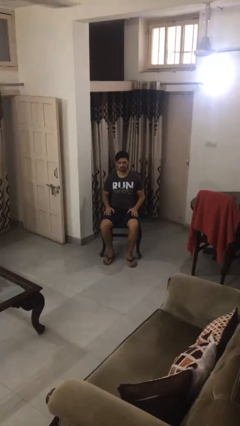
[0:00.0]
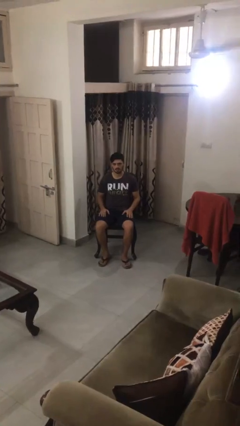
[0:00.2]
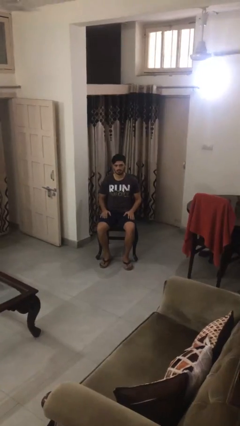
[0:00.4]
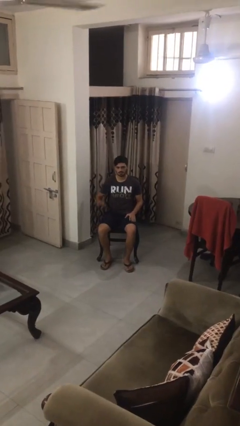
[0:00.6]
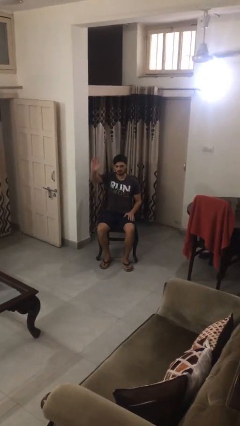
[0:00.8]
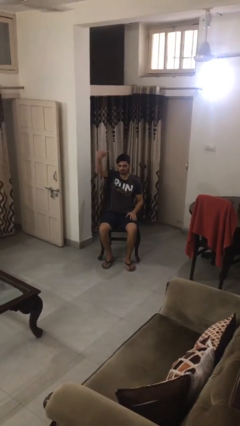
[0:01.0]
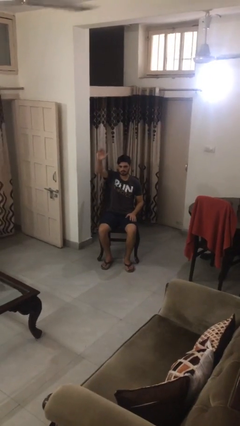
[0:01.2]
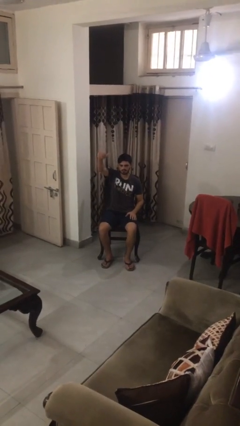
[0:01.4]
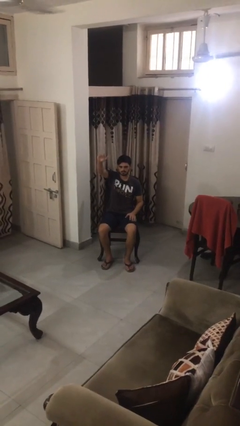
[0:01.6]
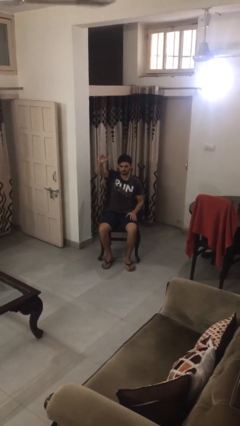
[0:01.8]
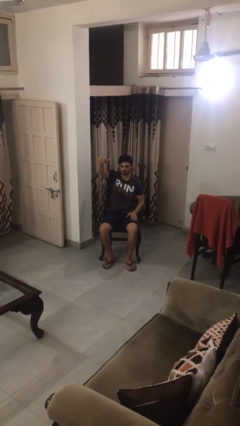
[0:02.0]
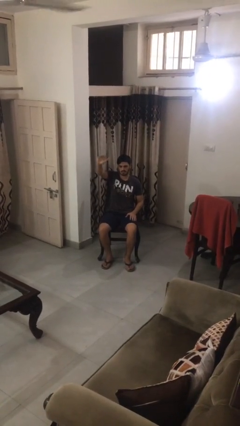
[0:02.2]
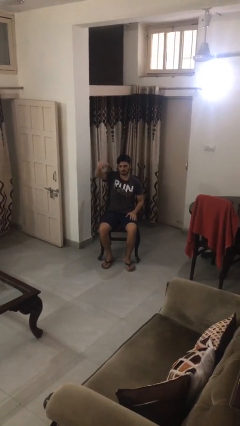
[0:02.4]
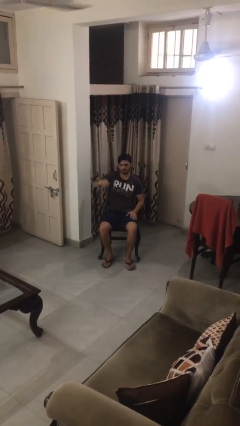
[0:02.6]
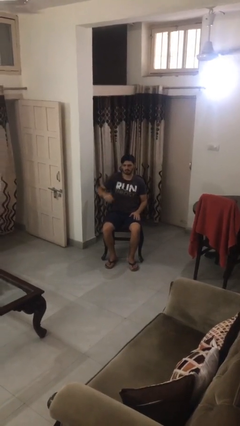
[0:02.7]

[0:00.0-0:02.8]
person gestures come here

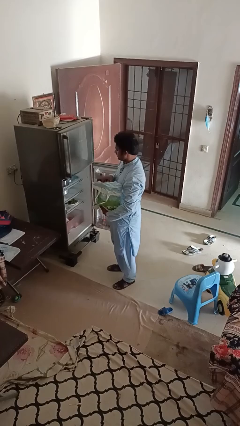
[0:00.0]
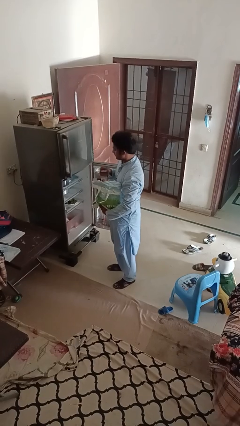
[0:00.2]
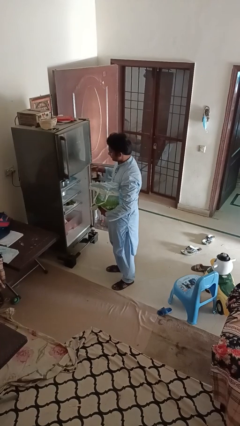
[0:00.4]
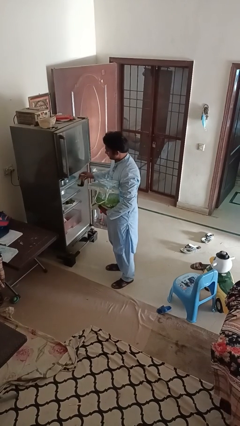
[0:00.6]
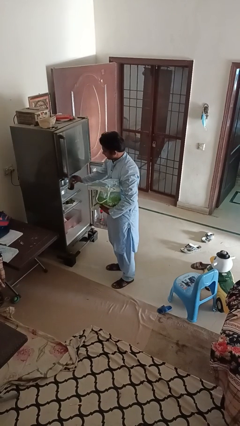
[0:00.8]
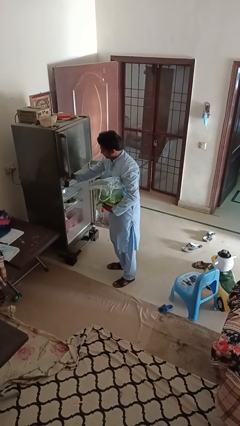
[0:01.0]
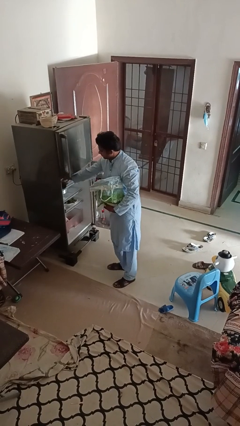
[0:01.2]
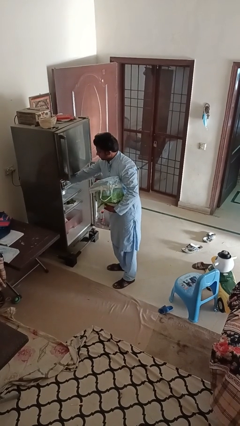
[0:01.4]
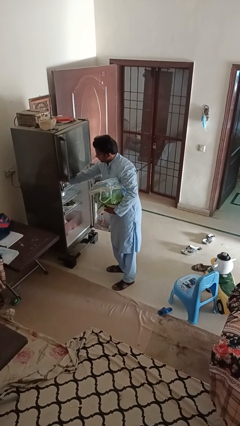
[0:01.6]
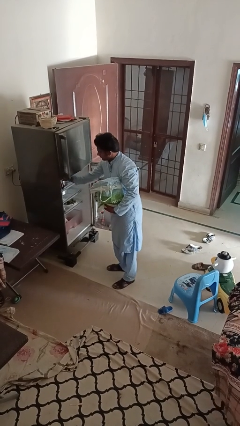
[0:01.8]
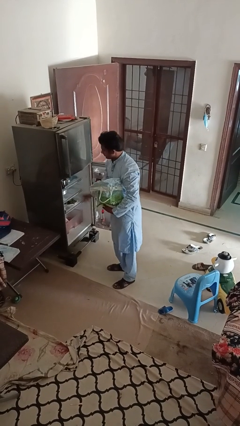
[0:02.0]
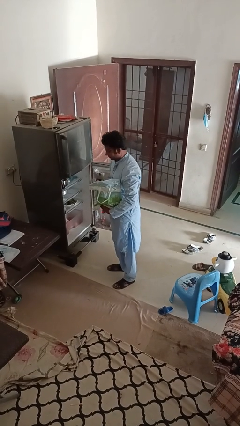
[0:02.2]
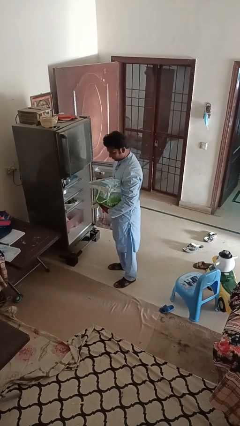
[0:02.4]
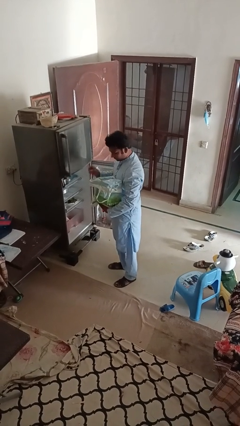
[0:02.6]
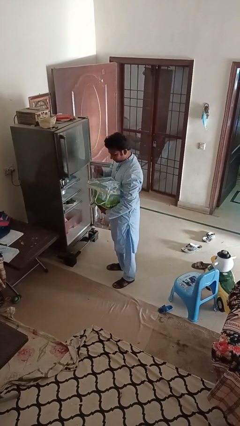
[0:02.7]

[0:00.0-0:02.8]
person loads groceries into refrigerator

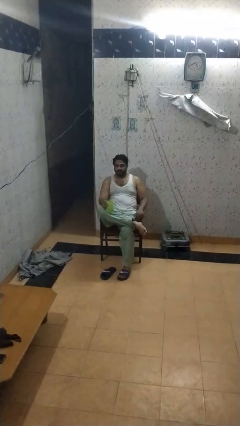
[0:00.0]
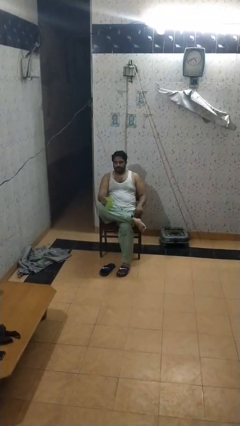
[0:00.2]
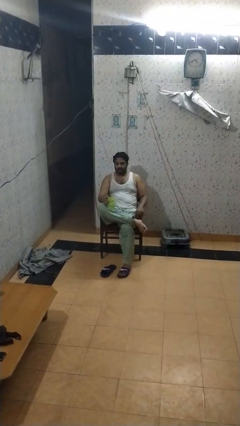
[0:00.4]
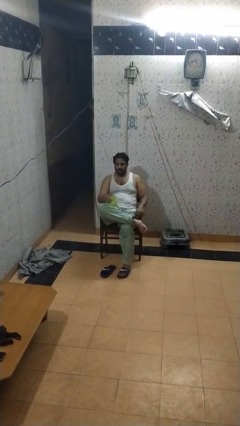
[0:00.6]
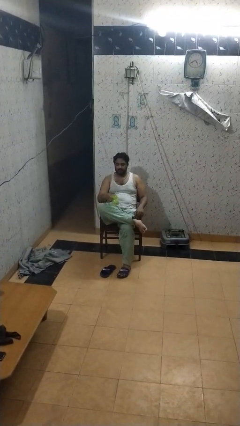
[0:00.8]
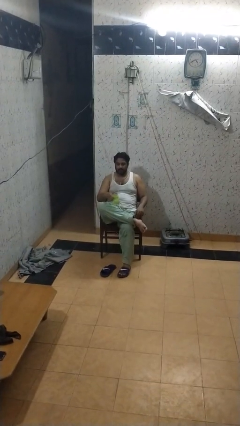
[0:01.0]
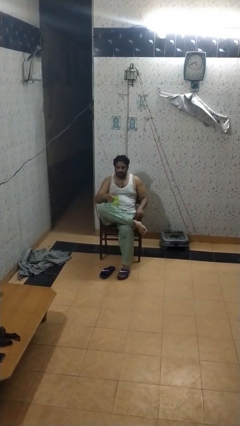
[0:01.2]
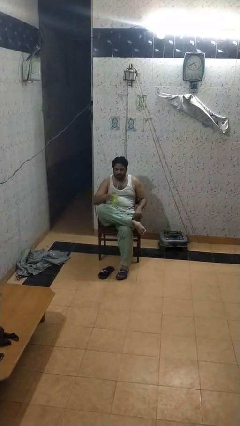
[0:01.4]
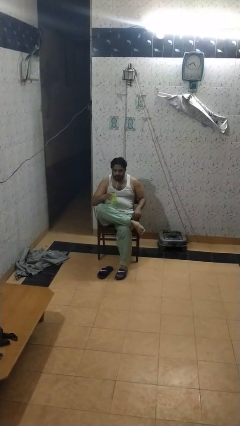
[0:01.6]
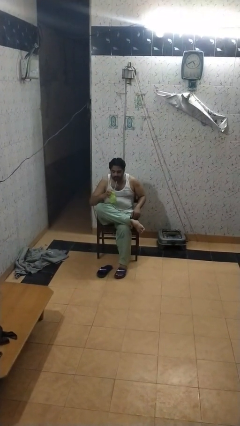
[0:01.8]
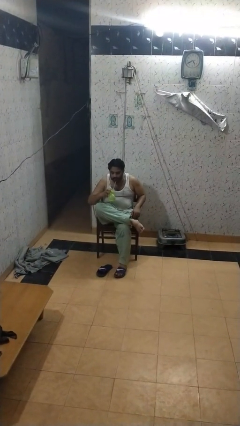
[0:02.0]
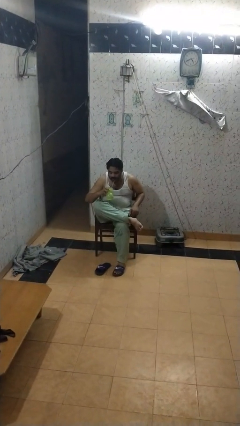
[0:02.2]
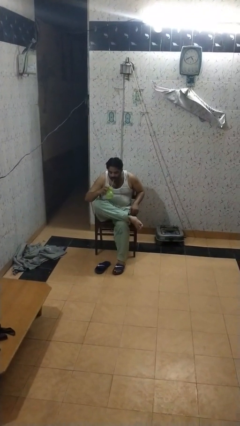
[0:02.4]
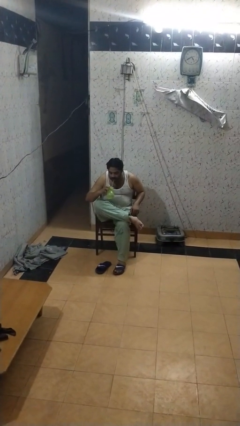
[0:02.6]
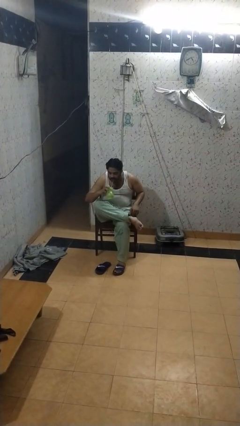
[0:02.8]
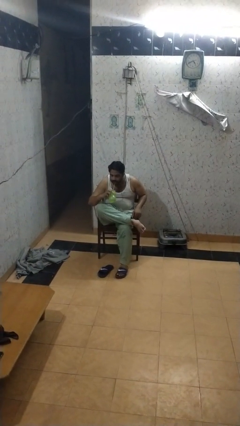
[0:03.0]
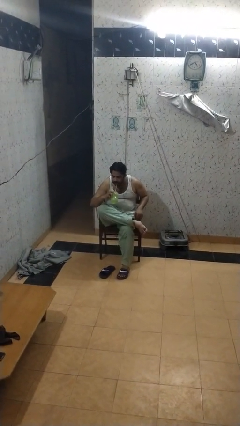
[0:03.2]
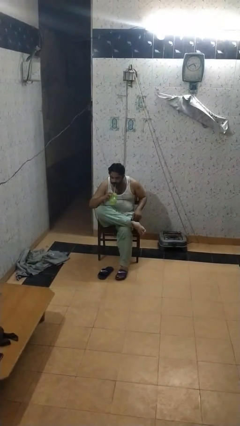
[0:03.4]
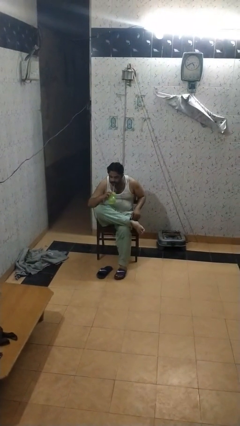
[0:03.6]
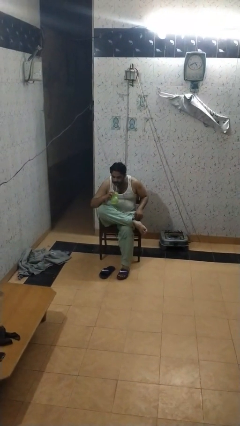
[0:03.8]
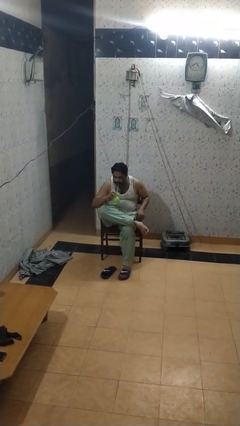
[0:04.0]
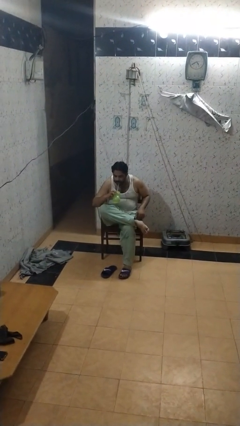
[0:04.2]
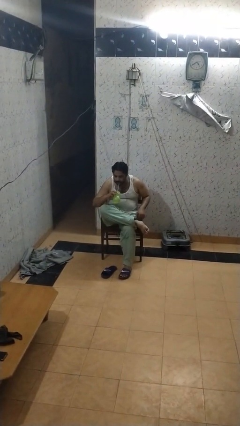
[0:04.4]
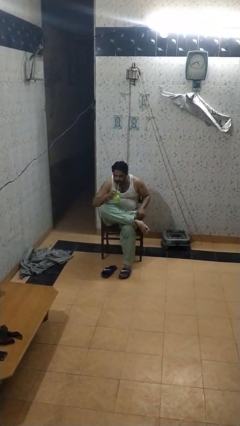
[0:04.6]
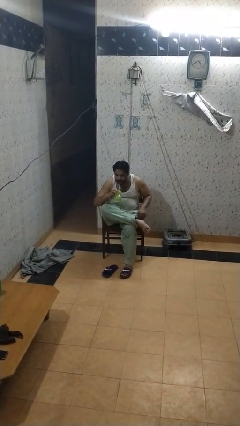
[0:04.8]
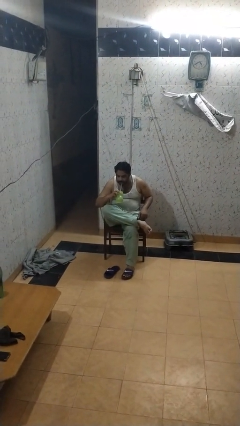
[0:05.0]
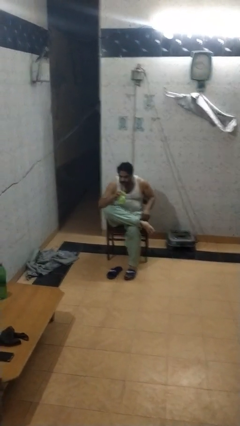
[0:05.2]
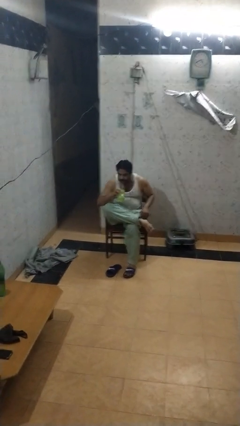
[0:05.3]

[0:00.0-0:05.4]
person drinks from straw

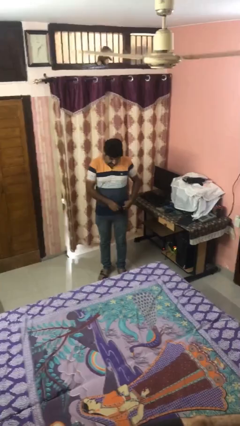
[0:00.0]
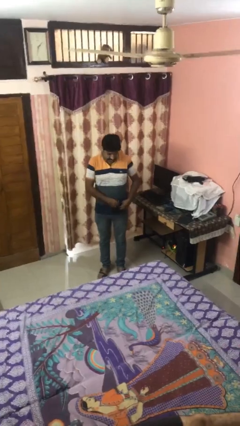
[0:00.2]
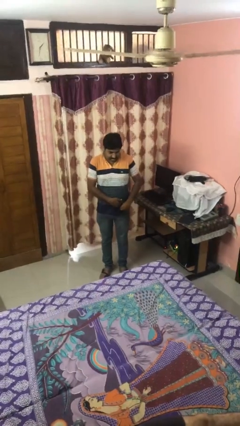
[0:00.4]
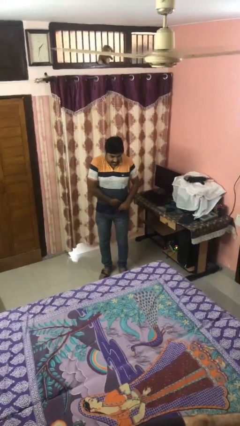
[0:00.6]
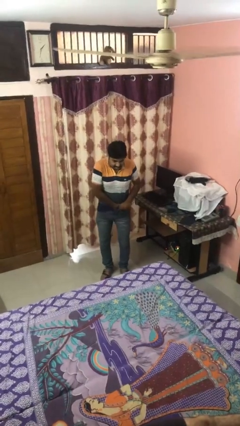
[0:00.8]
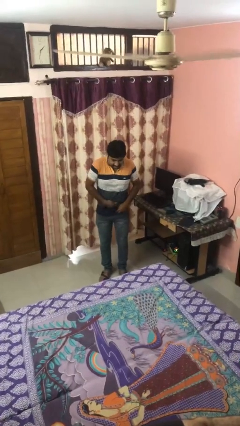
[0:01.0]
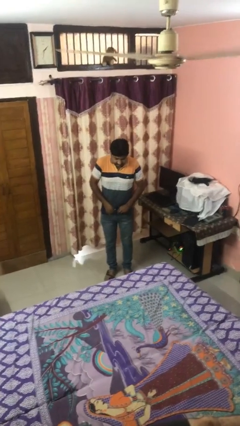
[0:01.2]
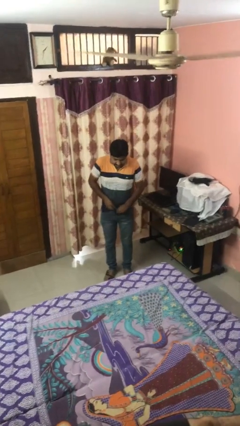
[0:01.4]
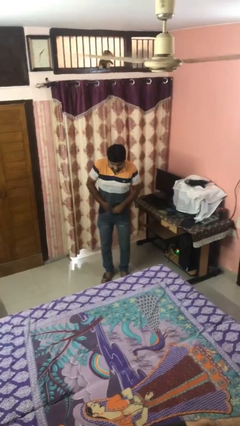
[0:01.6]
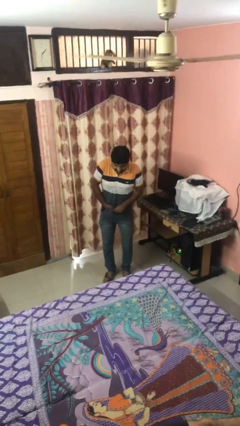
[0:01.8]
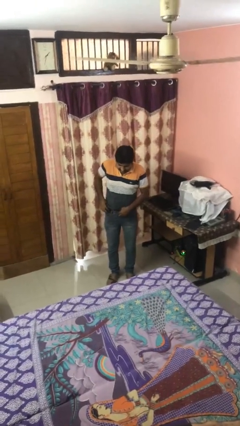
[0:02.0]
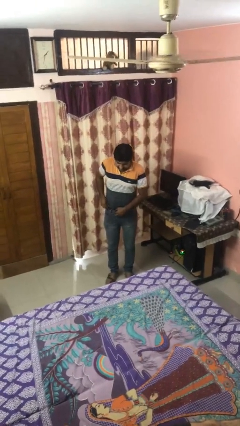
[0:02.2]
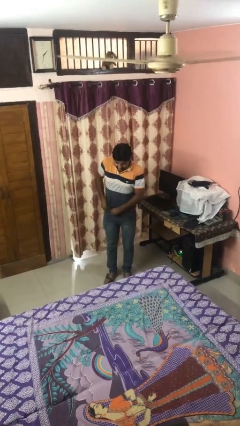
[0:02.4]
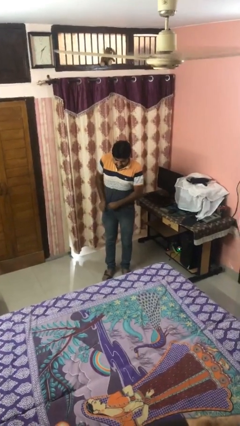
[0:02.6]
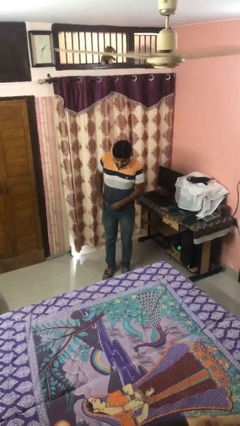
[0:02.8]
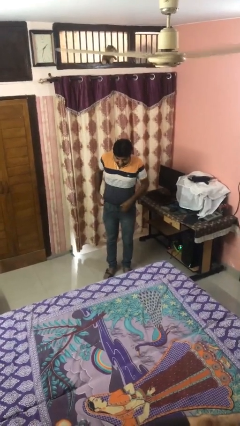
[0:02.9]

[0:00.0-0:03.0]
person tucks in shirt

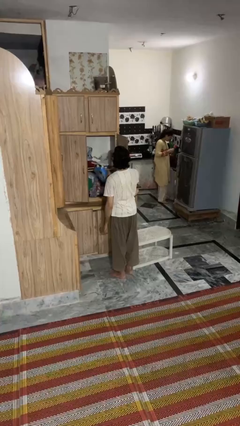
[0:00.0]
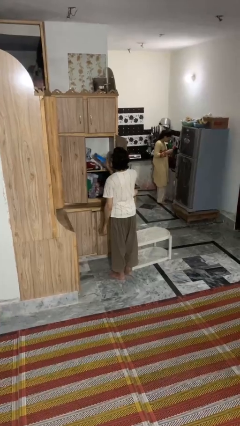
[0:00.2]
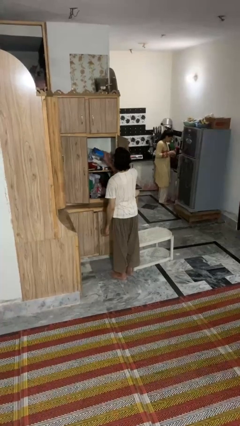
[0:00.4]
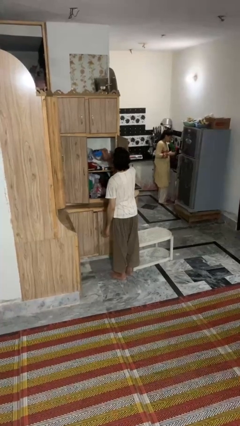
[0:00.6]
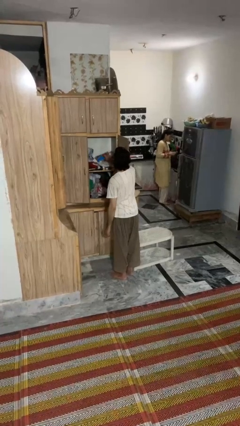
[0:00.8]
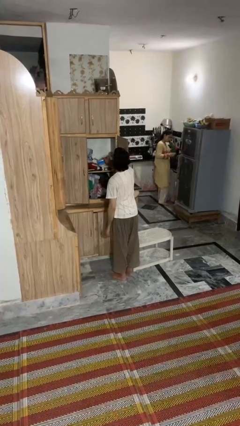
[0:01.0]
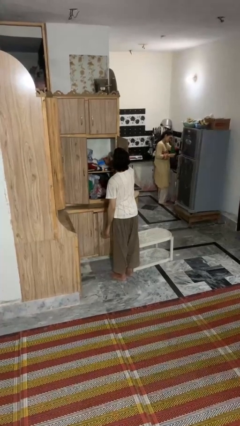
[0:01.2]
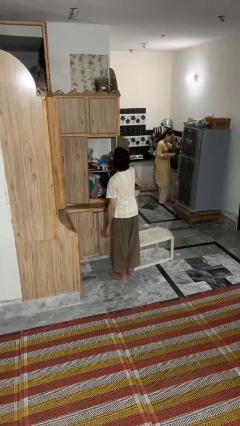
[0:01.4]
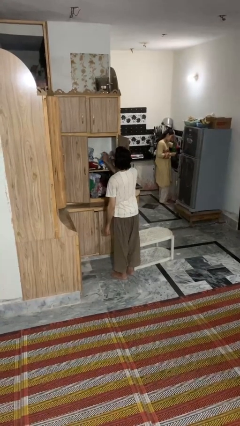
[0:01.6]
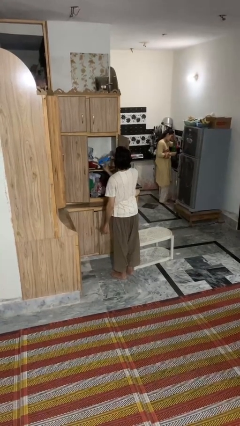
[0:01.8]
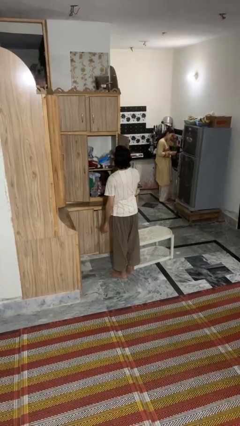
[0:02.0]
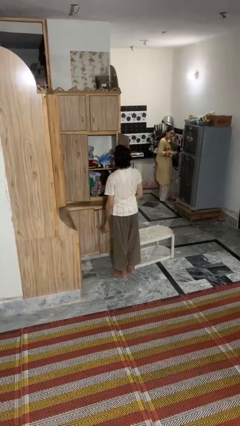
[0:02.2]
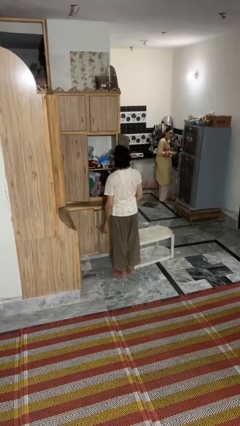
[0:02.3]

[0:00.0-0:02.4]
person puts down object into cabinet

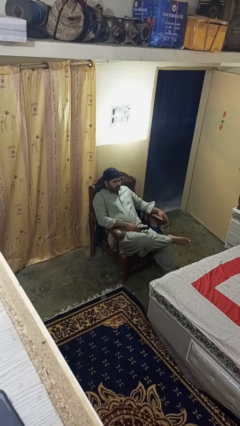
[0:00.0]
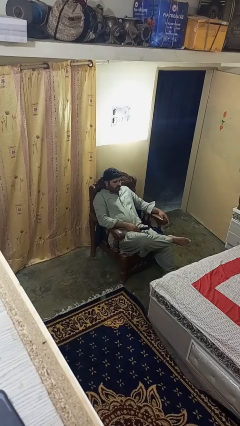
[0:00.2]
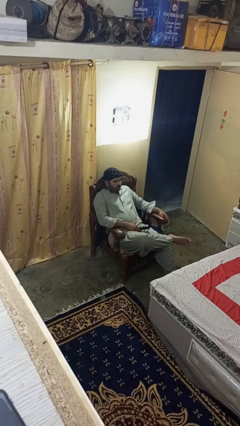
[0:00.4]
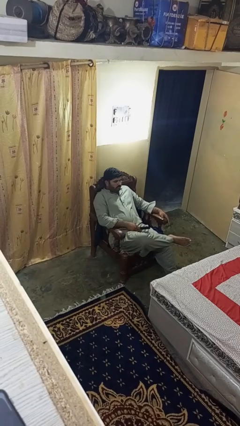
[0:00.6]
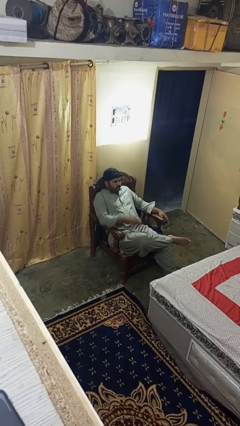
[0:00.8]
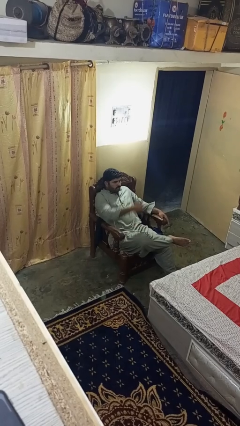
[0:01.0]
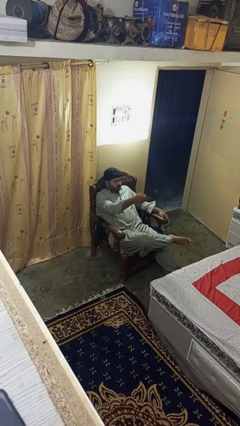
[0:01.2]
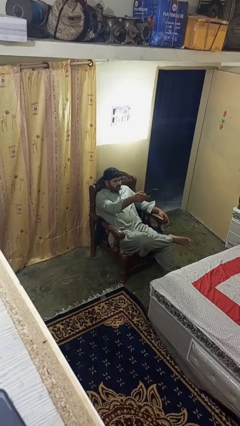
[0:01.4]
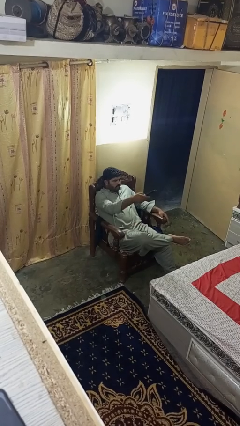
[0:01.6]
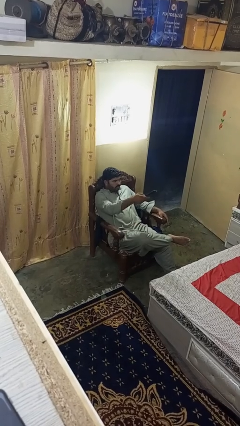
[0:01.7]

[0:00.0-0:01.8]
person uses television remote
